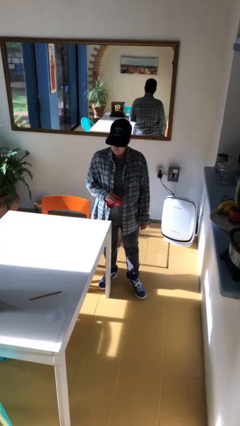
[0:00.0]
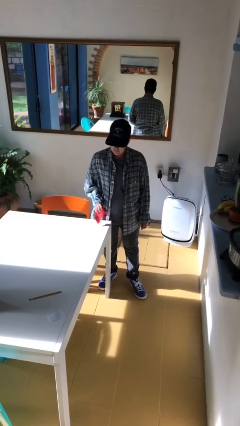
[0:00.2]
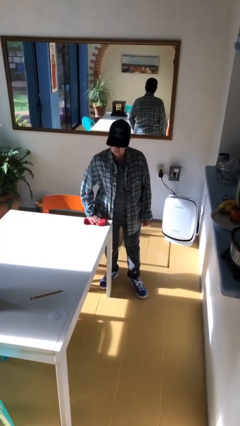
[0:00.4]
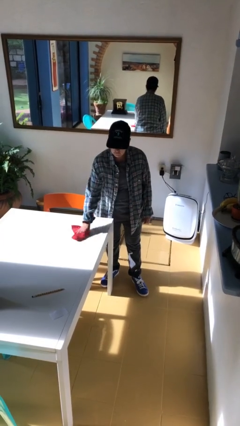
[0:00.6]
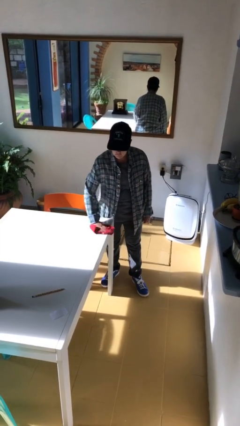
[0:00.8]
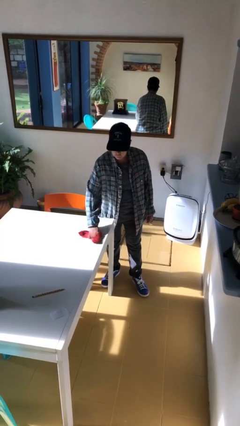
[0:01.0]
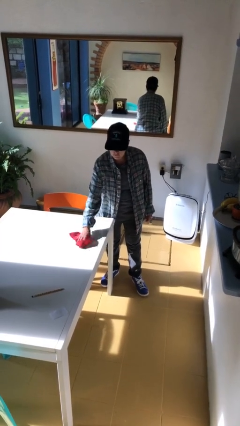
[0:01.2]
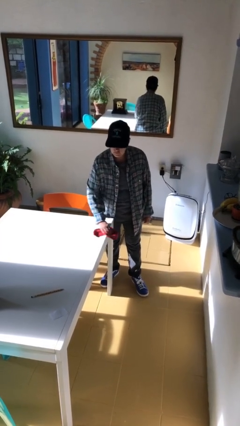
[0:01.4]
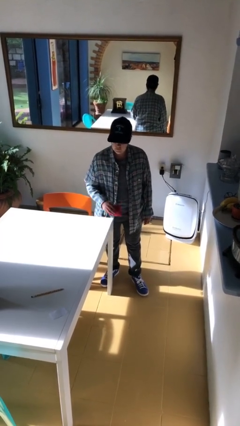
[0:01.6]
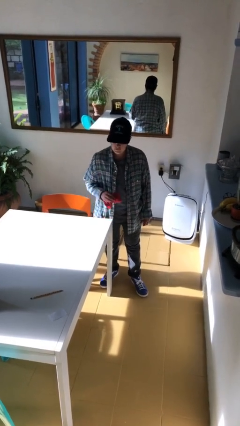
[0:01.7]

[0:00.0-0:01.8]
person cleans table with rag

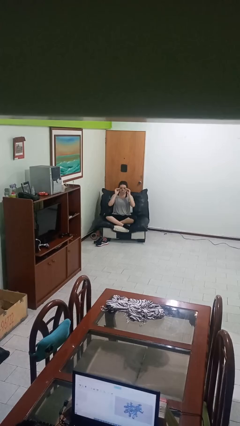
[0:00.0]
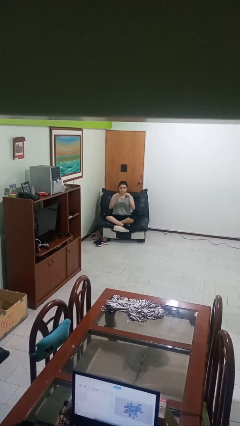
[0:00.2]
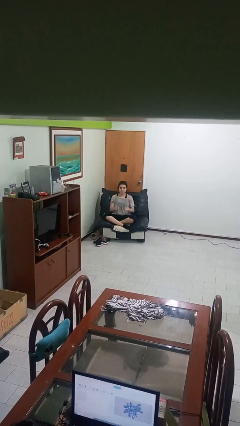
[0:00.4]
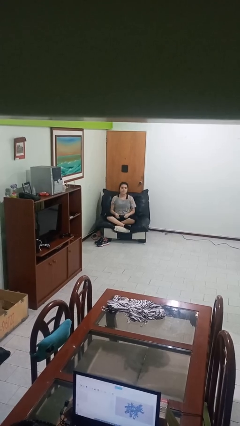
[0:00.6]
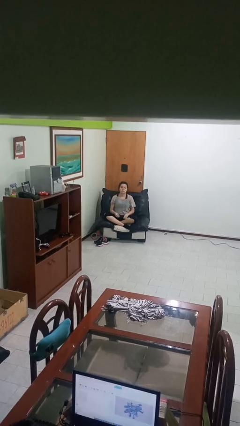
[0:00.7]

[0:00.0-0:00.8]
person takes off glasses

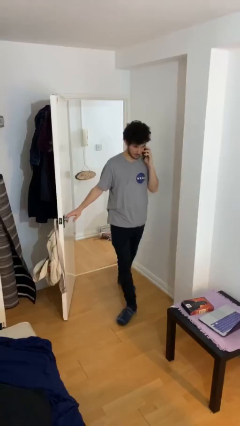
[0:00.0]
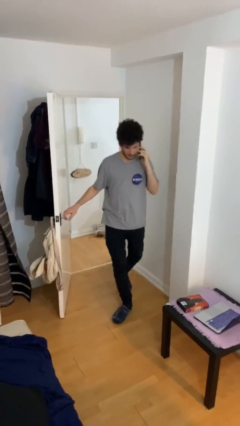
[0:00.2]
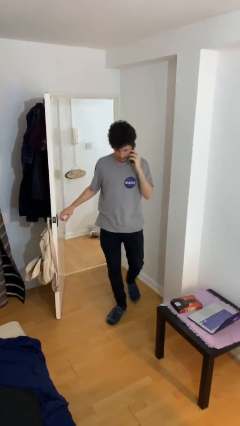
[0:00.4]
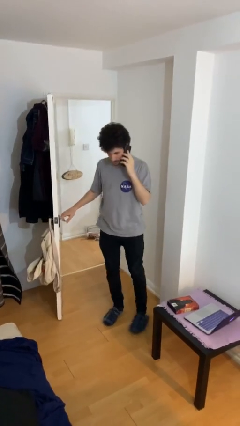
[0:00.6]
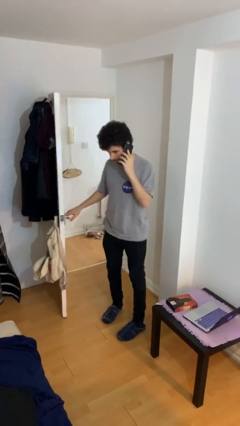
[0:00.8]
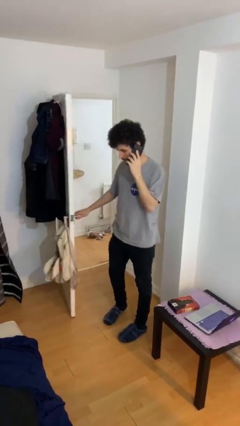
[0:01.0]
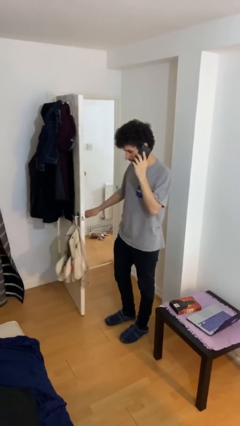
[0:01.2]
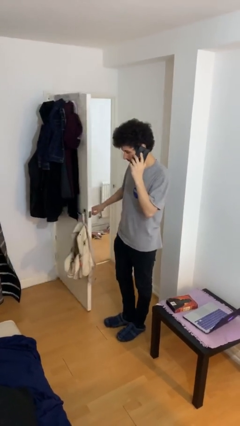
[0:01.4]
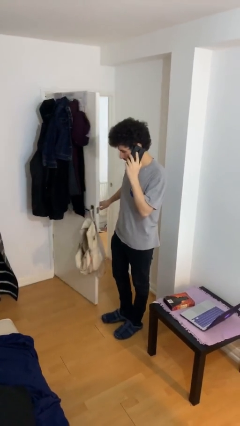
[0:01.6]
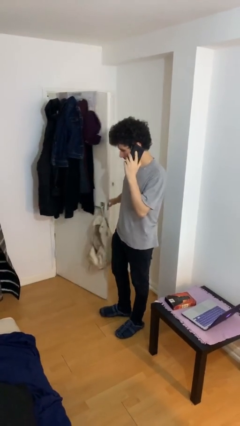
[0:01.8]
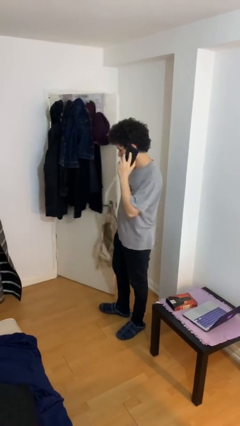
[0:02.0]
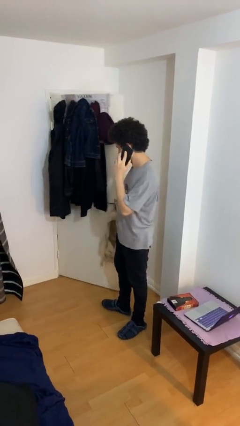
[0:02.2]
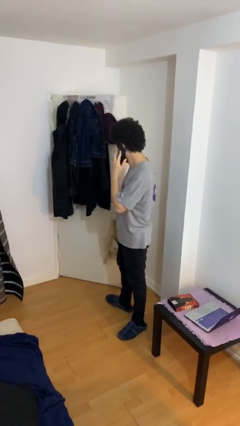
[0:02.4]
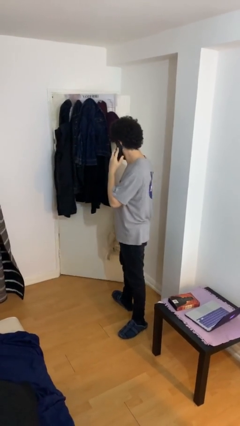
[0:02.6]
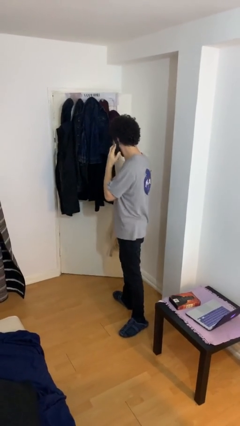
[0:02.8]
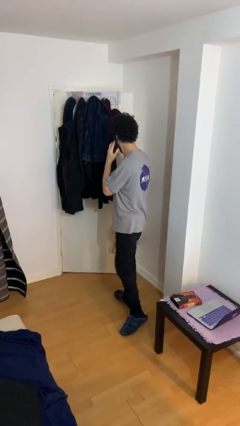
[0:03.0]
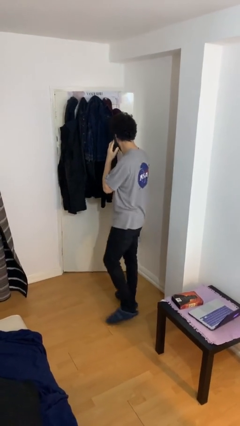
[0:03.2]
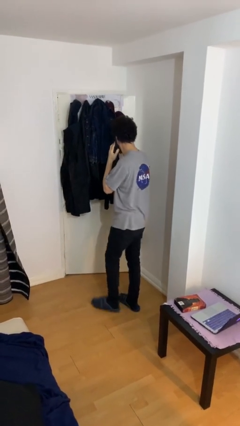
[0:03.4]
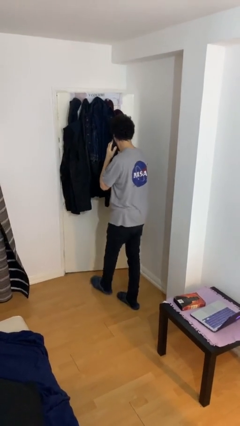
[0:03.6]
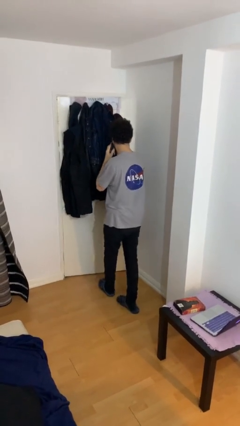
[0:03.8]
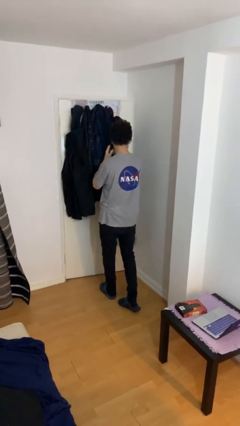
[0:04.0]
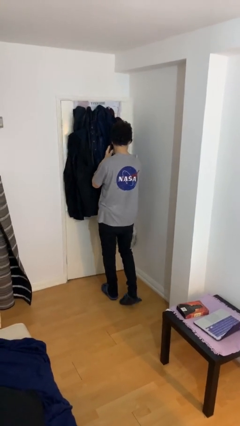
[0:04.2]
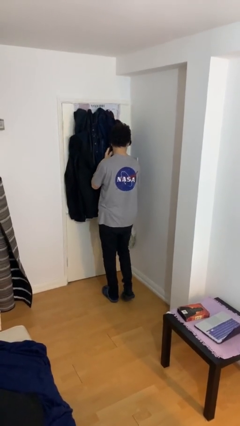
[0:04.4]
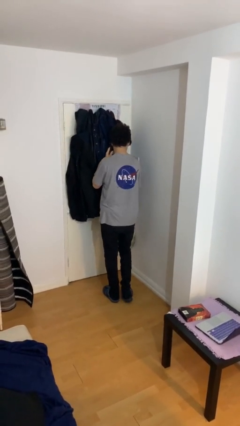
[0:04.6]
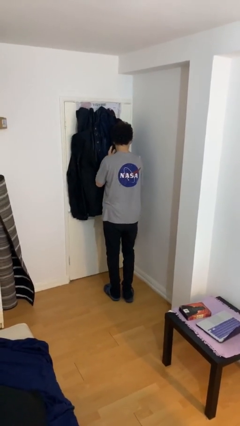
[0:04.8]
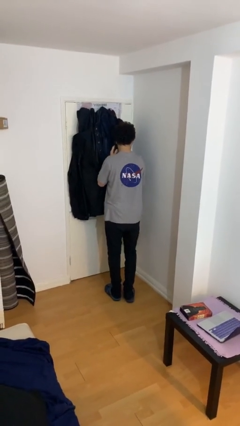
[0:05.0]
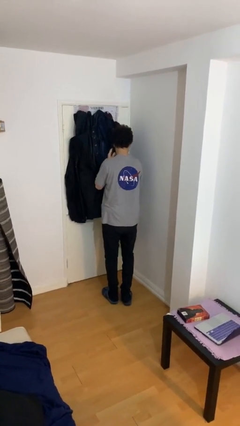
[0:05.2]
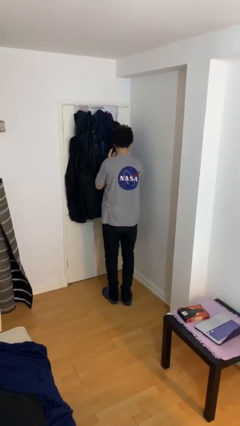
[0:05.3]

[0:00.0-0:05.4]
person closes facility door

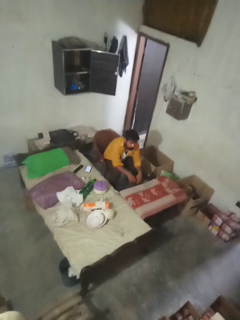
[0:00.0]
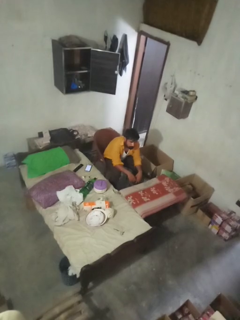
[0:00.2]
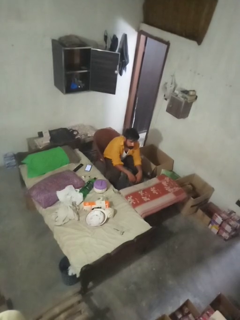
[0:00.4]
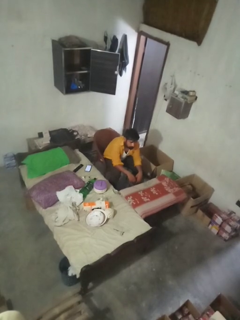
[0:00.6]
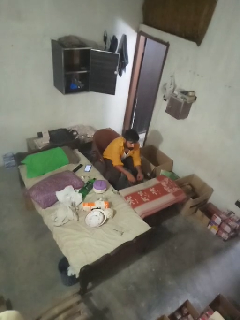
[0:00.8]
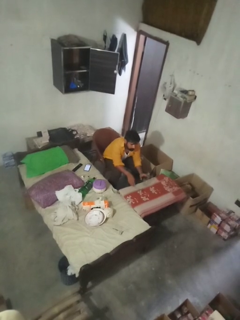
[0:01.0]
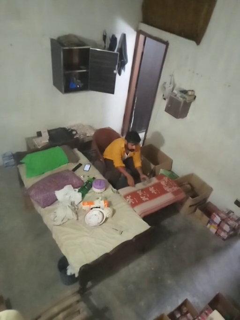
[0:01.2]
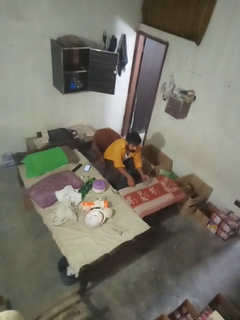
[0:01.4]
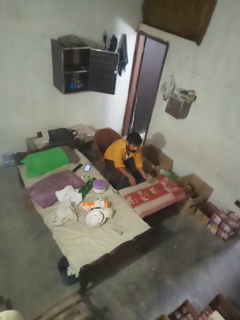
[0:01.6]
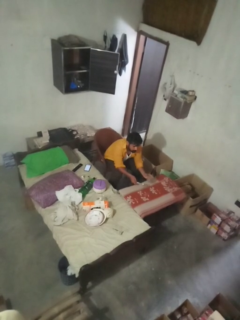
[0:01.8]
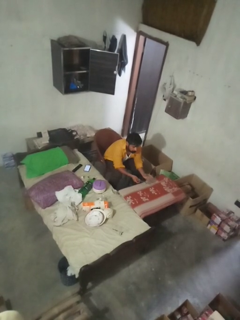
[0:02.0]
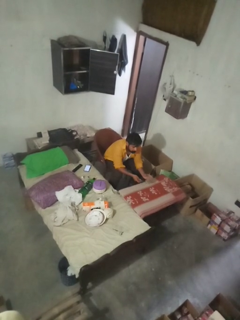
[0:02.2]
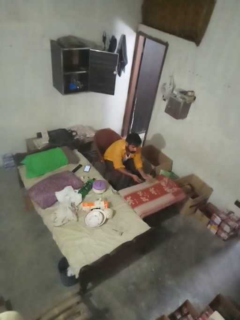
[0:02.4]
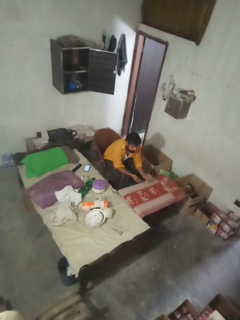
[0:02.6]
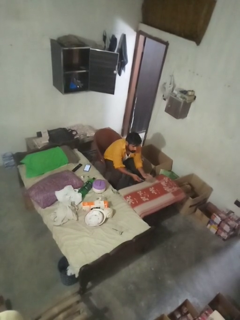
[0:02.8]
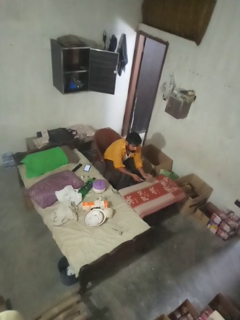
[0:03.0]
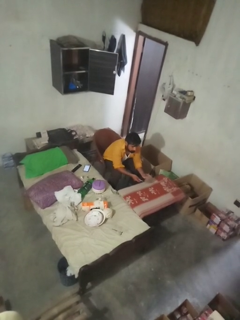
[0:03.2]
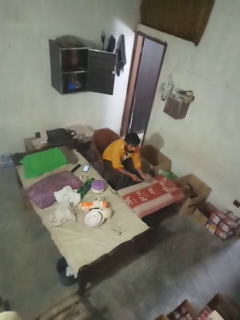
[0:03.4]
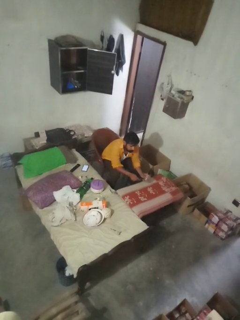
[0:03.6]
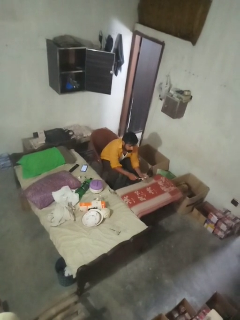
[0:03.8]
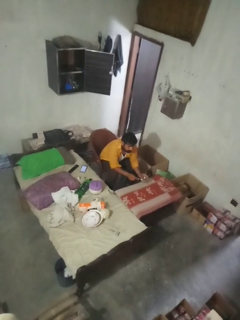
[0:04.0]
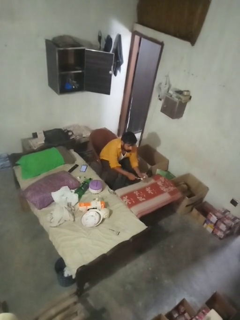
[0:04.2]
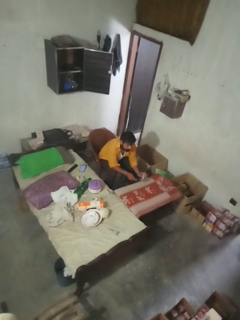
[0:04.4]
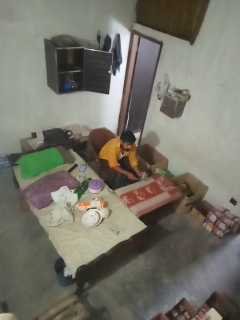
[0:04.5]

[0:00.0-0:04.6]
person knocks over glass

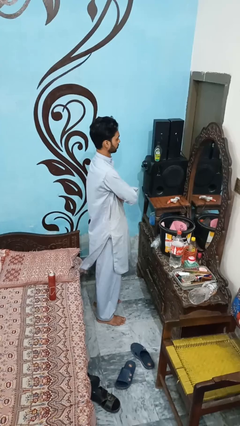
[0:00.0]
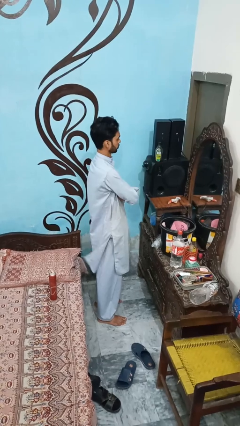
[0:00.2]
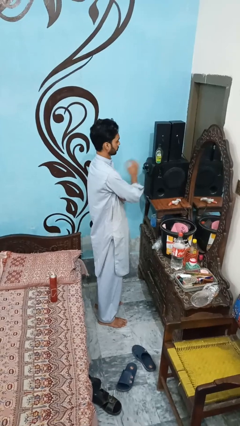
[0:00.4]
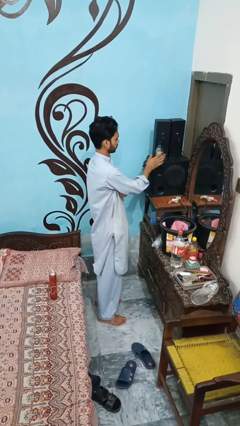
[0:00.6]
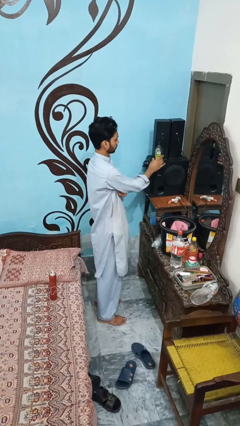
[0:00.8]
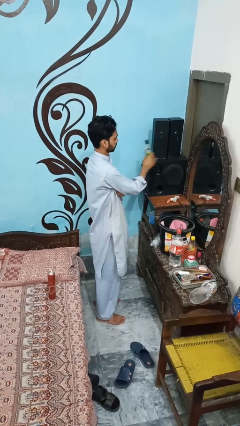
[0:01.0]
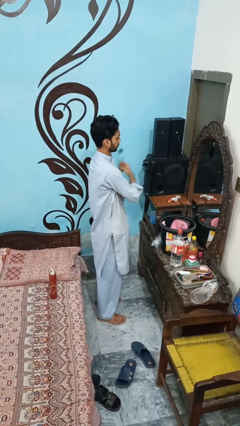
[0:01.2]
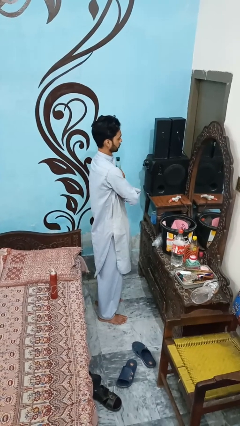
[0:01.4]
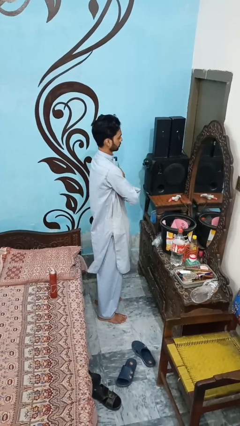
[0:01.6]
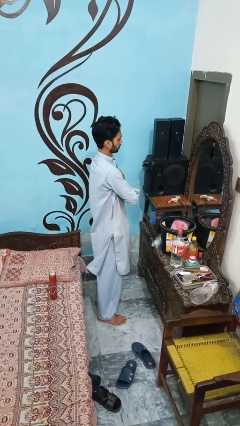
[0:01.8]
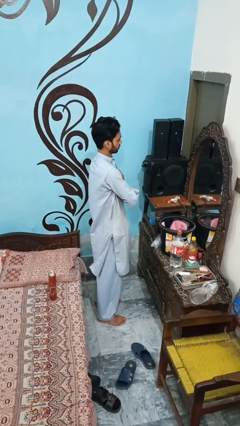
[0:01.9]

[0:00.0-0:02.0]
person puts down object on shelf

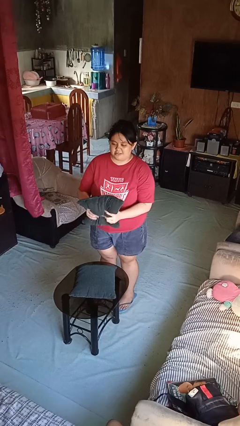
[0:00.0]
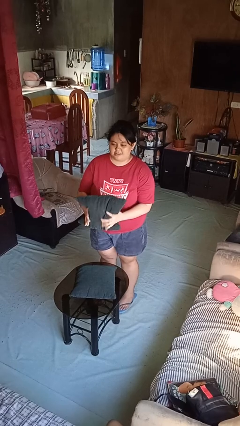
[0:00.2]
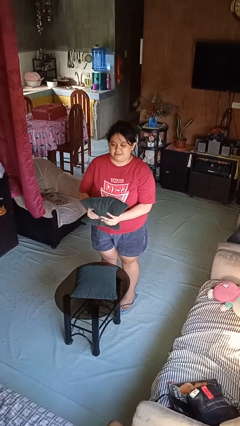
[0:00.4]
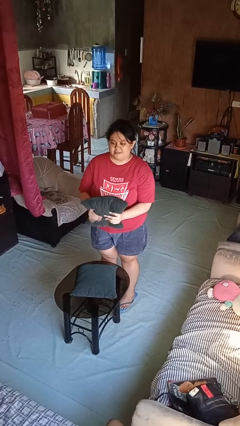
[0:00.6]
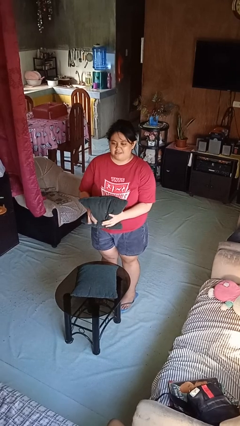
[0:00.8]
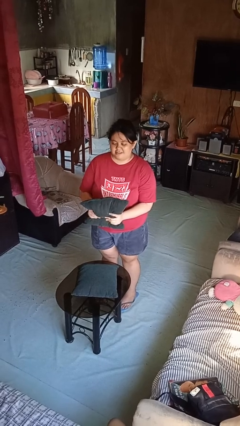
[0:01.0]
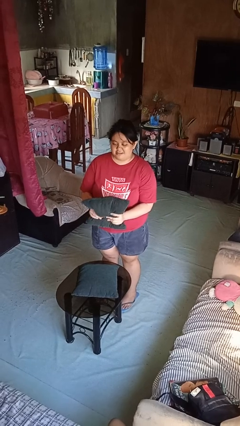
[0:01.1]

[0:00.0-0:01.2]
person squeezes object

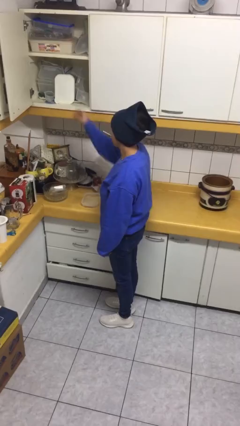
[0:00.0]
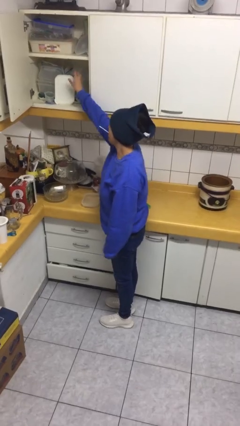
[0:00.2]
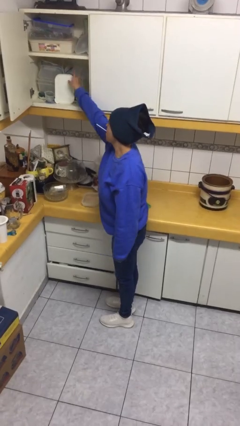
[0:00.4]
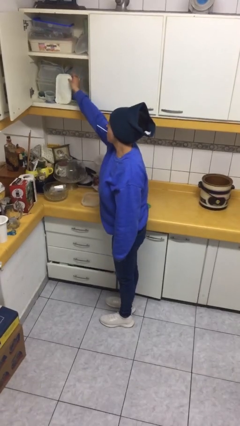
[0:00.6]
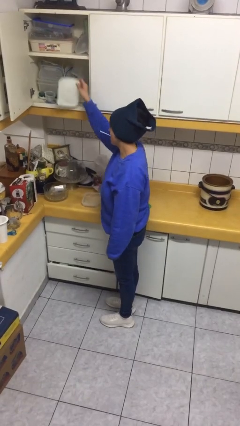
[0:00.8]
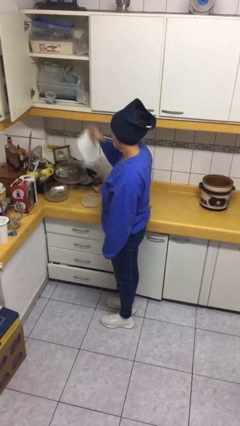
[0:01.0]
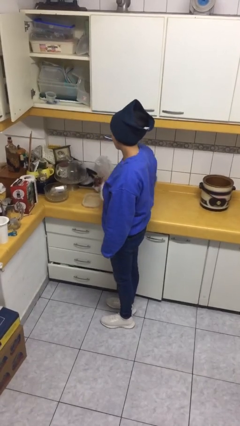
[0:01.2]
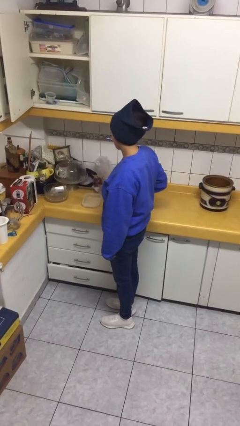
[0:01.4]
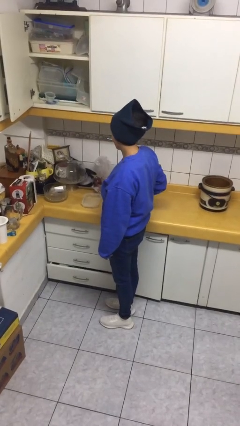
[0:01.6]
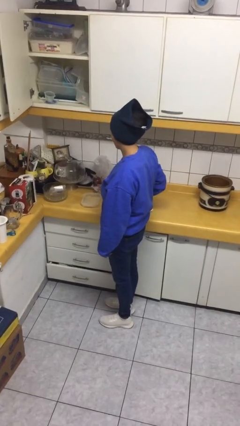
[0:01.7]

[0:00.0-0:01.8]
person takes object from cabinet

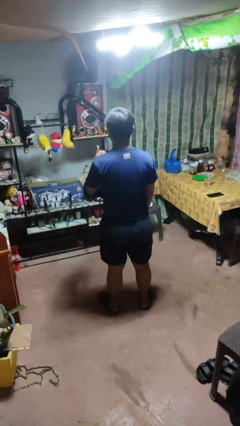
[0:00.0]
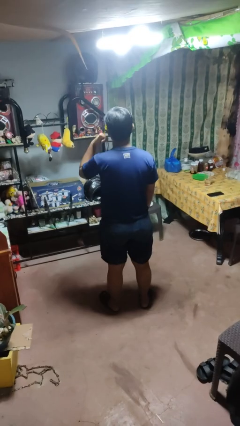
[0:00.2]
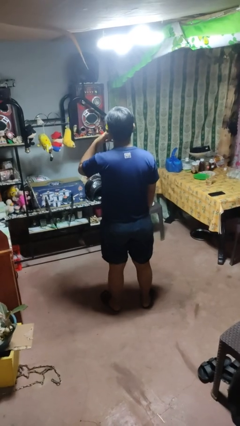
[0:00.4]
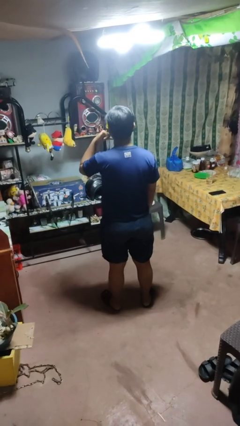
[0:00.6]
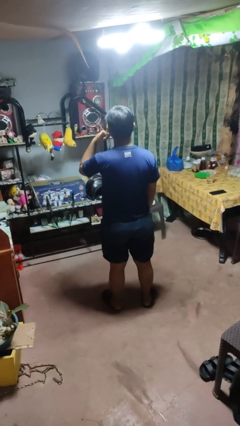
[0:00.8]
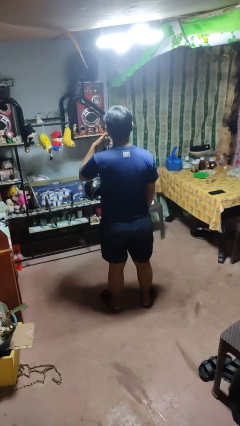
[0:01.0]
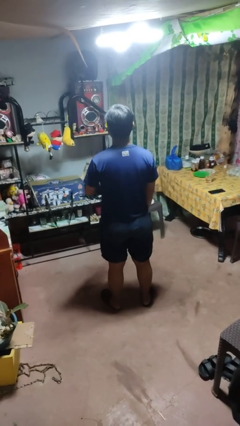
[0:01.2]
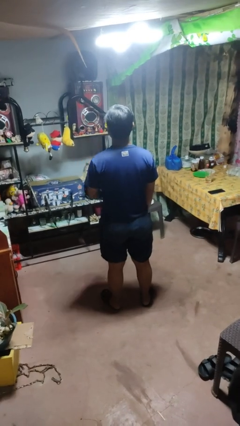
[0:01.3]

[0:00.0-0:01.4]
person gestures call me
